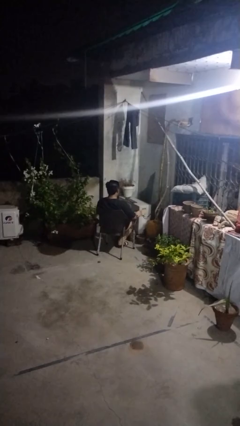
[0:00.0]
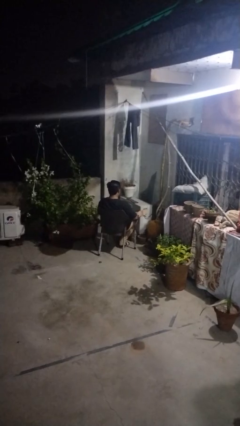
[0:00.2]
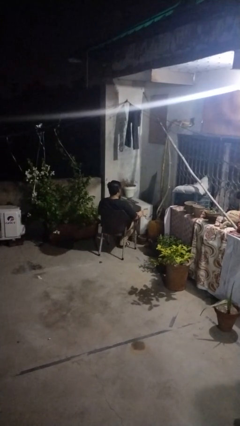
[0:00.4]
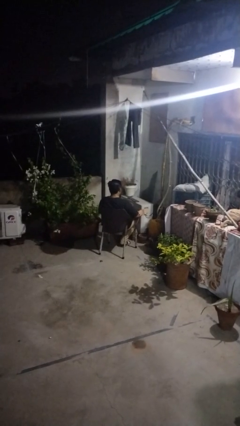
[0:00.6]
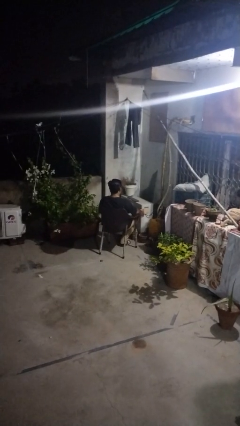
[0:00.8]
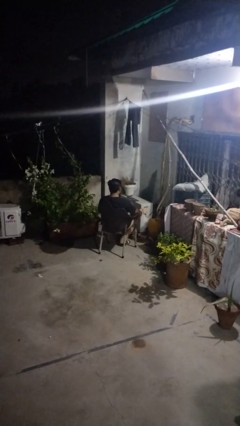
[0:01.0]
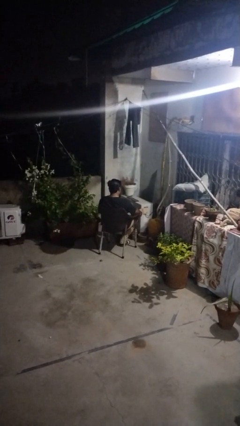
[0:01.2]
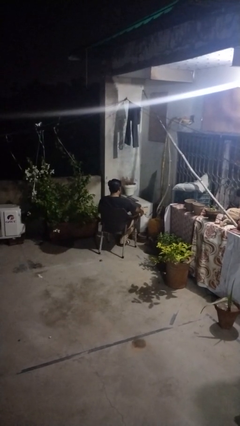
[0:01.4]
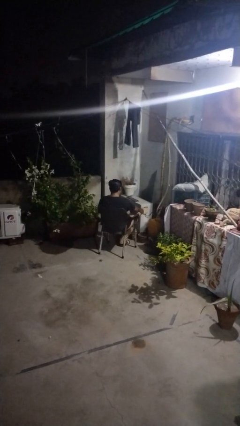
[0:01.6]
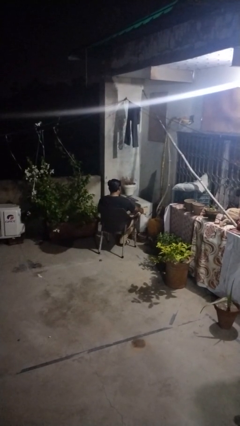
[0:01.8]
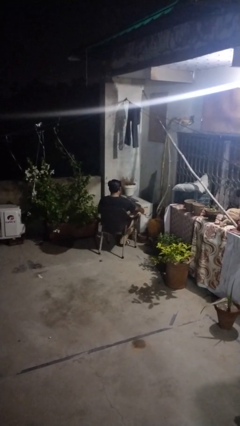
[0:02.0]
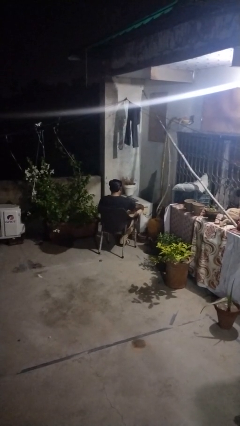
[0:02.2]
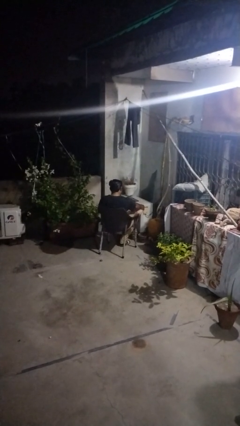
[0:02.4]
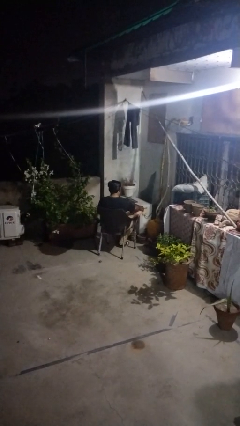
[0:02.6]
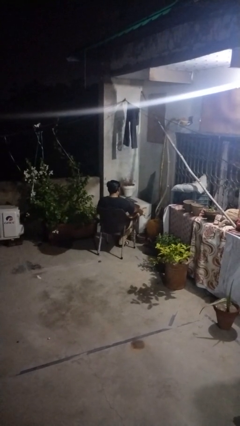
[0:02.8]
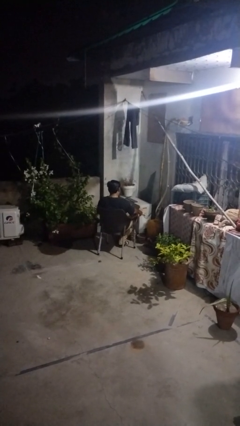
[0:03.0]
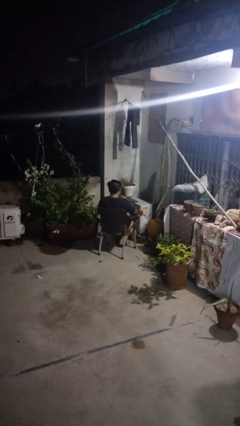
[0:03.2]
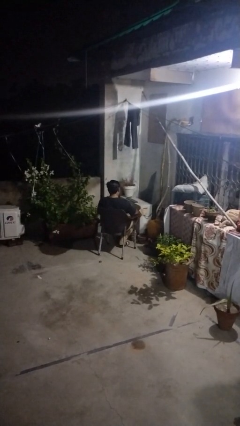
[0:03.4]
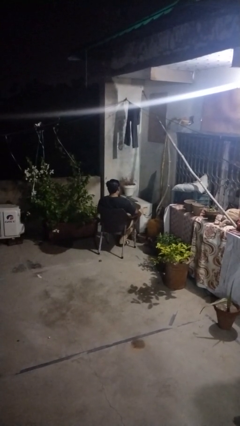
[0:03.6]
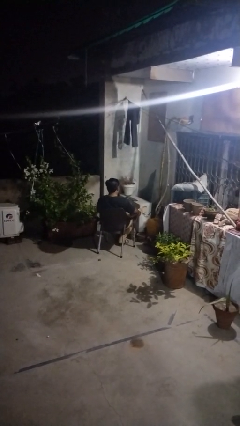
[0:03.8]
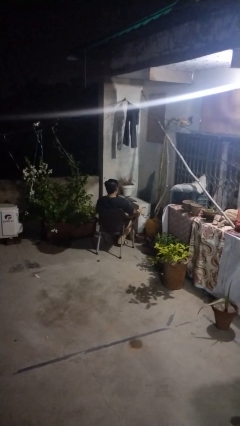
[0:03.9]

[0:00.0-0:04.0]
person rubs foot

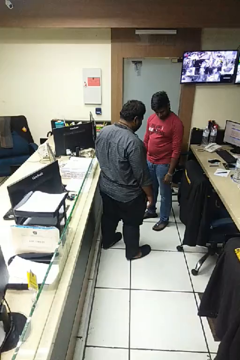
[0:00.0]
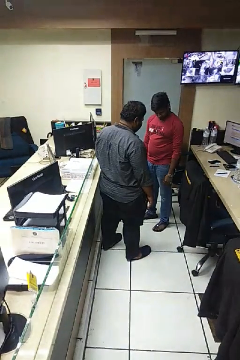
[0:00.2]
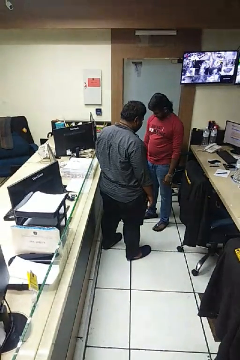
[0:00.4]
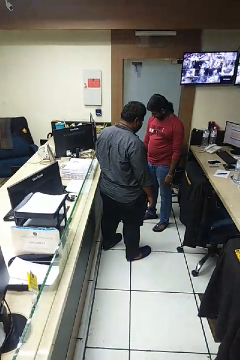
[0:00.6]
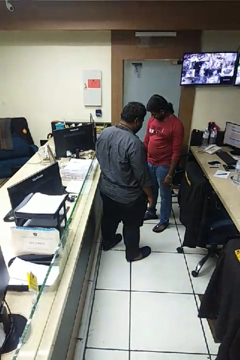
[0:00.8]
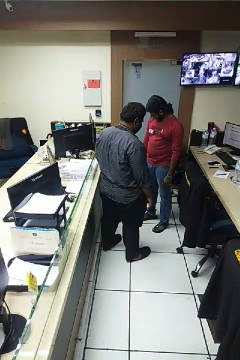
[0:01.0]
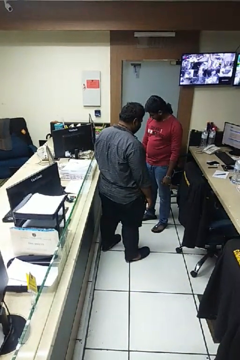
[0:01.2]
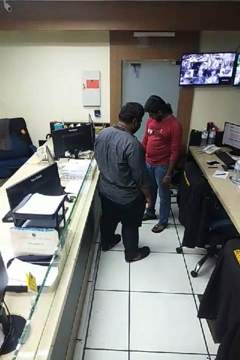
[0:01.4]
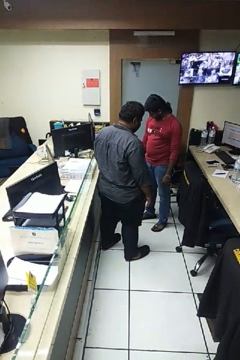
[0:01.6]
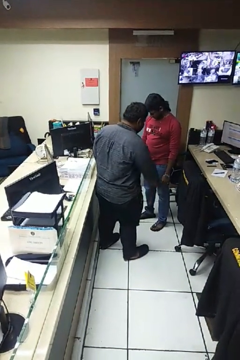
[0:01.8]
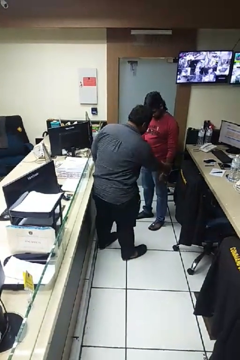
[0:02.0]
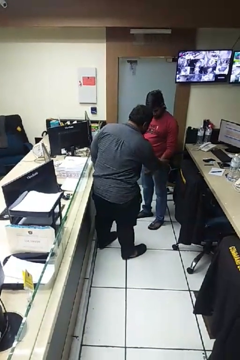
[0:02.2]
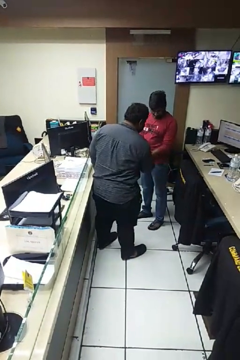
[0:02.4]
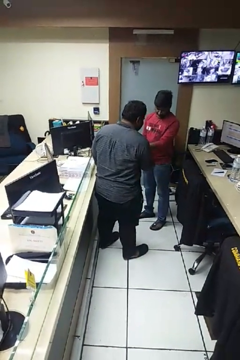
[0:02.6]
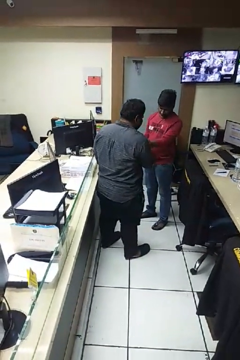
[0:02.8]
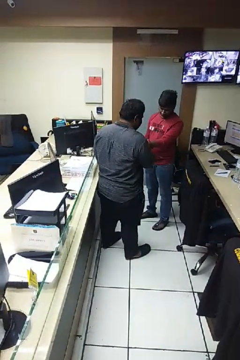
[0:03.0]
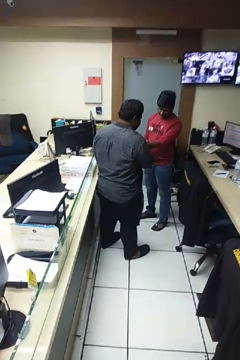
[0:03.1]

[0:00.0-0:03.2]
person grabs person by forearm

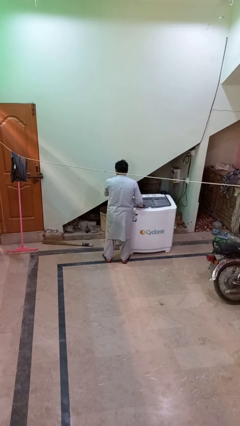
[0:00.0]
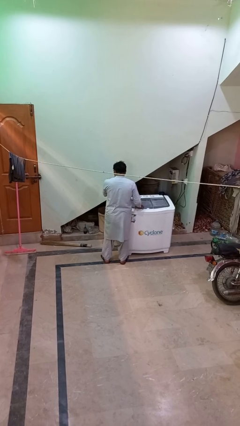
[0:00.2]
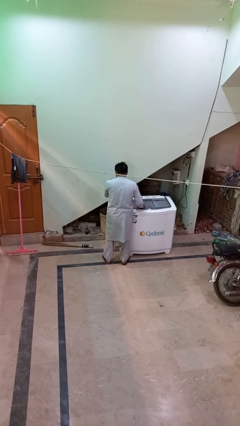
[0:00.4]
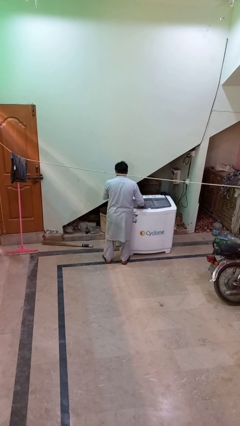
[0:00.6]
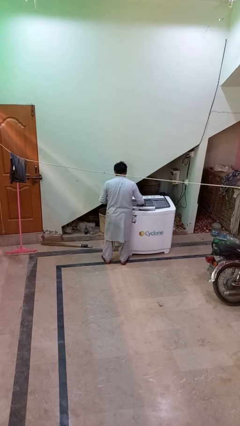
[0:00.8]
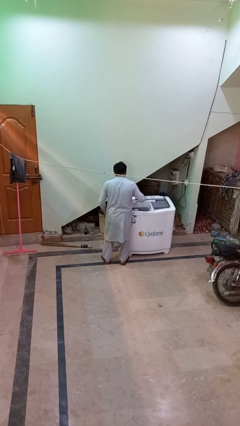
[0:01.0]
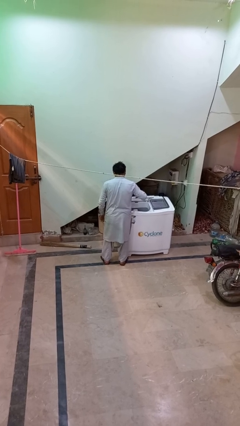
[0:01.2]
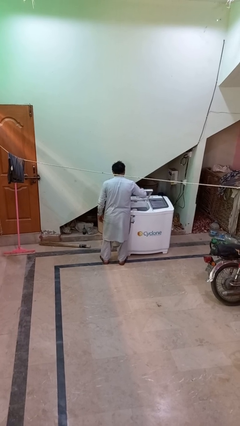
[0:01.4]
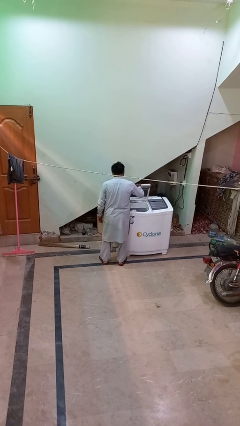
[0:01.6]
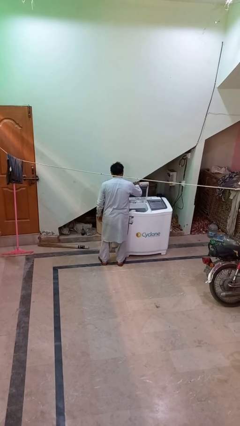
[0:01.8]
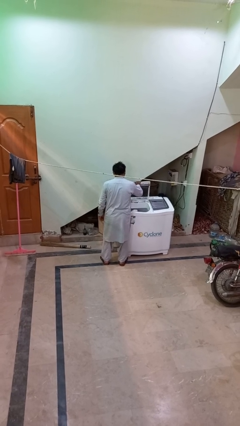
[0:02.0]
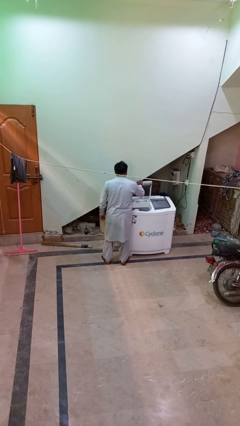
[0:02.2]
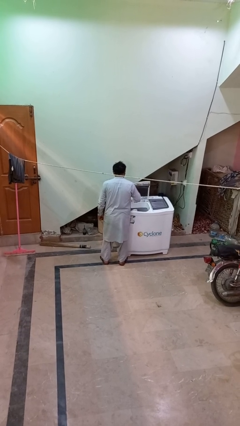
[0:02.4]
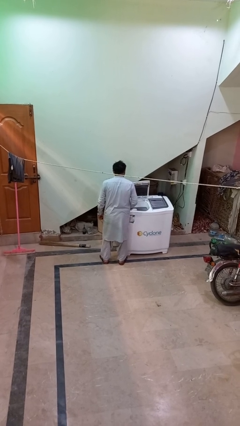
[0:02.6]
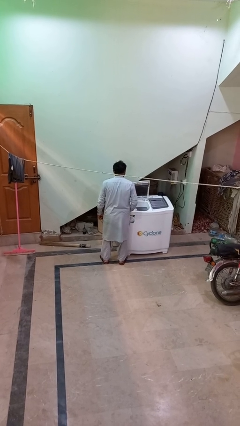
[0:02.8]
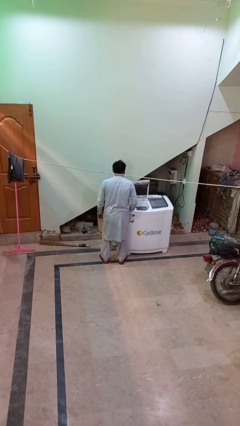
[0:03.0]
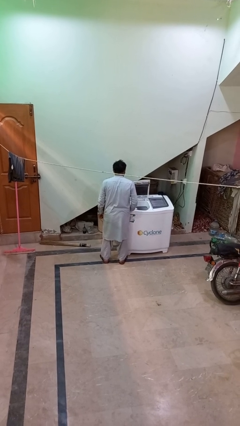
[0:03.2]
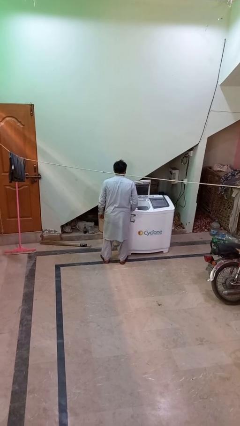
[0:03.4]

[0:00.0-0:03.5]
person opens clothes washer

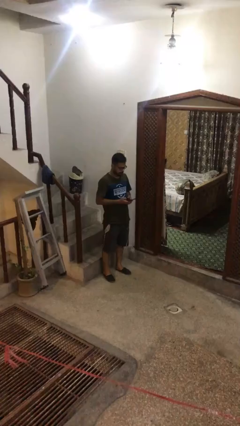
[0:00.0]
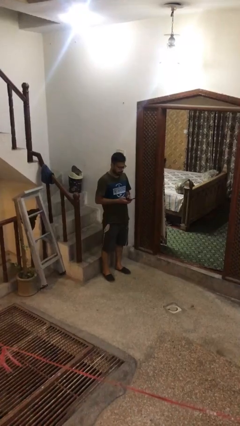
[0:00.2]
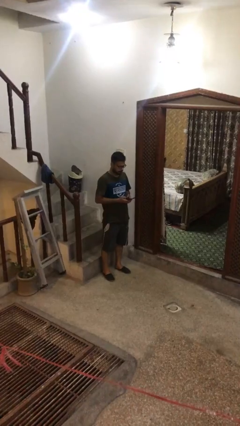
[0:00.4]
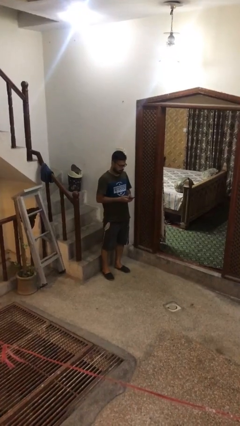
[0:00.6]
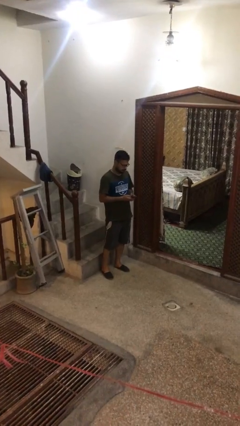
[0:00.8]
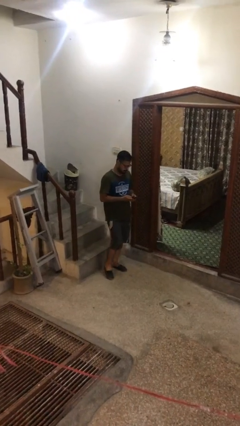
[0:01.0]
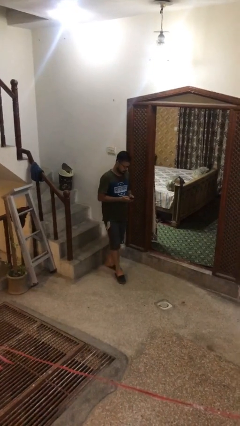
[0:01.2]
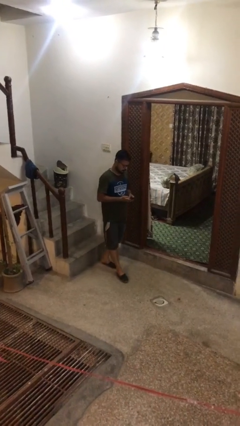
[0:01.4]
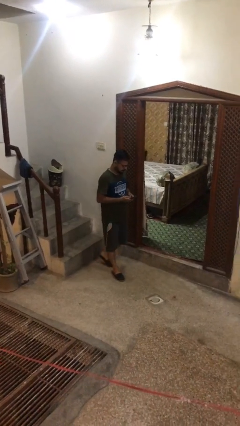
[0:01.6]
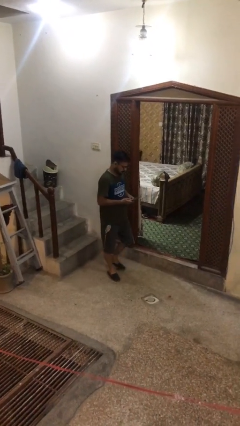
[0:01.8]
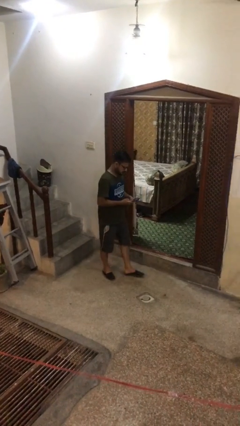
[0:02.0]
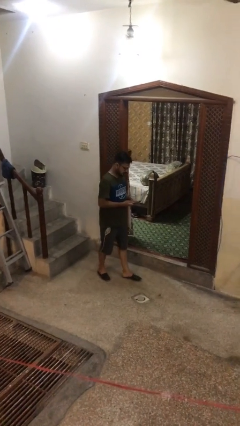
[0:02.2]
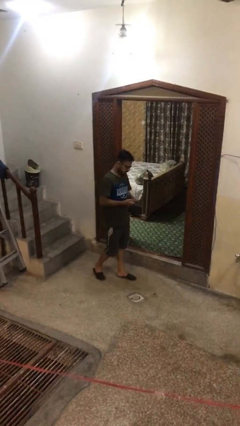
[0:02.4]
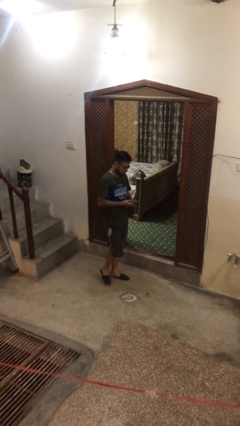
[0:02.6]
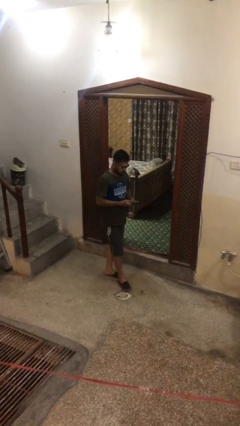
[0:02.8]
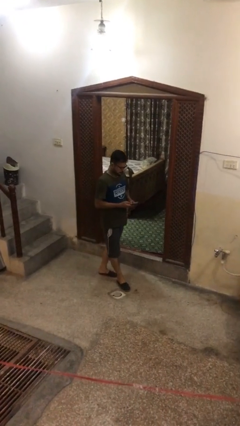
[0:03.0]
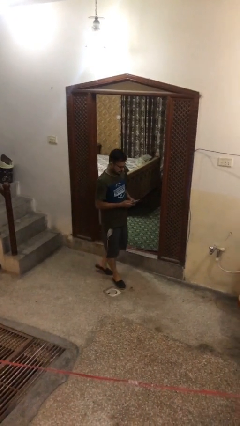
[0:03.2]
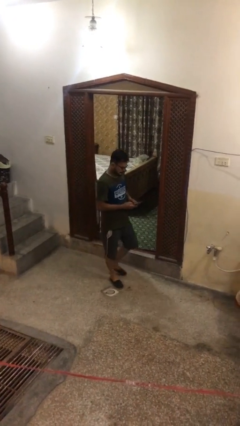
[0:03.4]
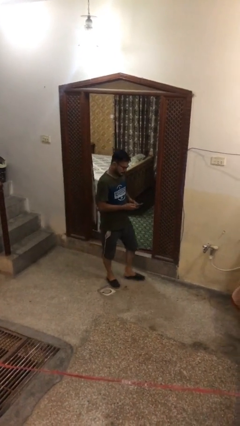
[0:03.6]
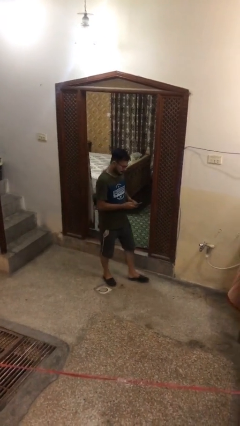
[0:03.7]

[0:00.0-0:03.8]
person texts on phone

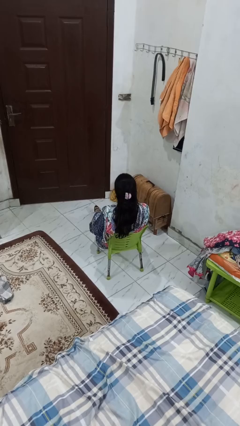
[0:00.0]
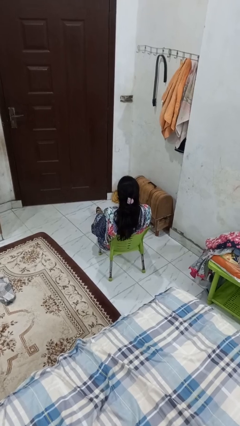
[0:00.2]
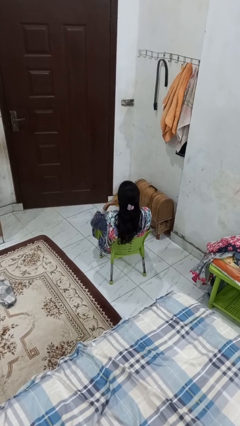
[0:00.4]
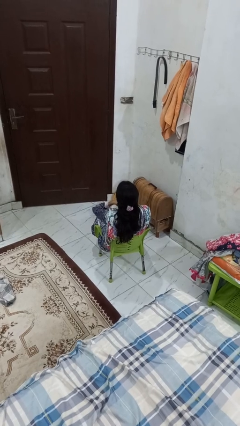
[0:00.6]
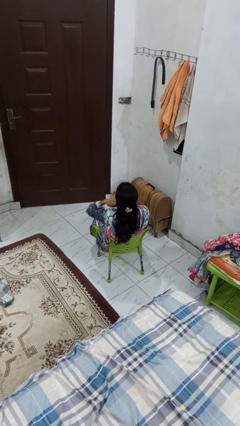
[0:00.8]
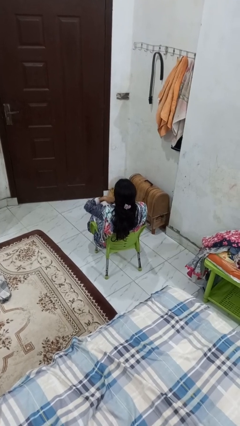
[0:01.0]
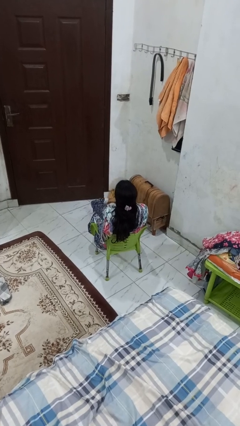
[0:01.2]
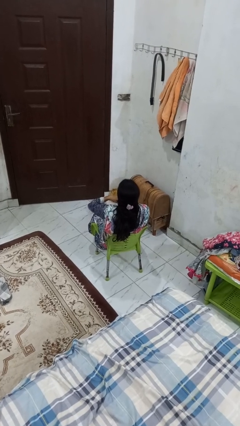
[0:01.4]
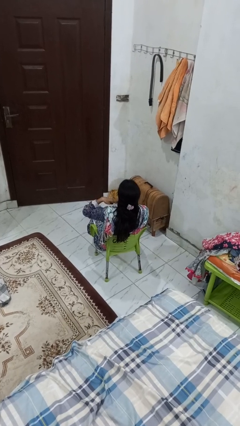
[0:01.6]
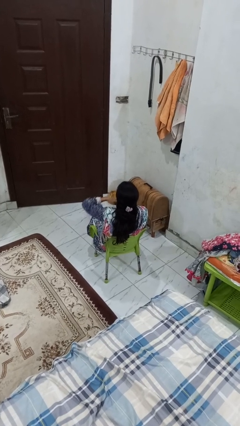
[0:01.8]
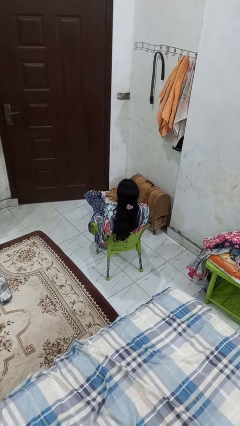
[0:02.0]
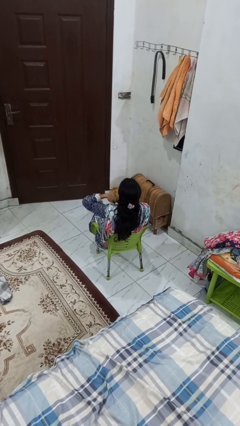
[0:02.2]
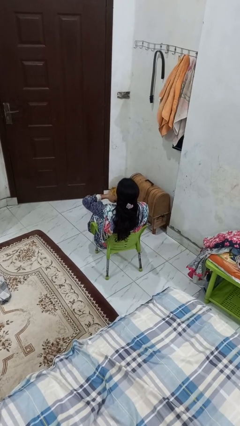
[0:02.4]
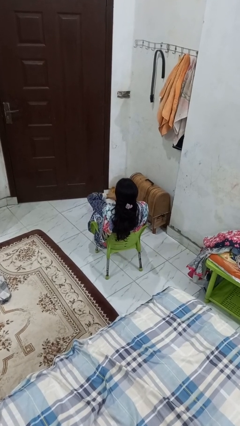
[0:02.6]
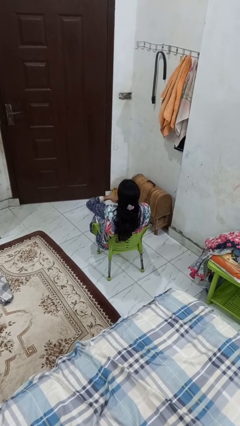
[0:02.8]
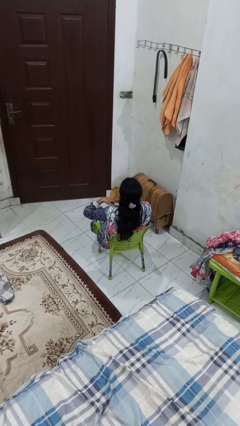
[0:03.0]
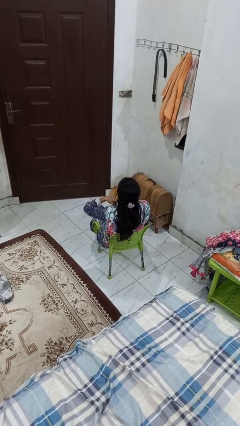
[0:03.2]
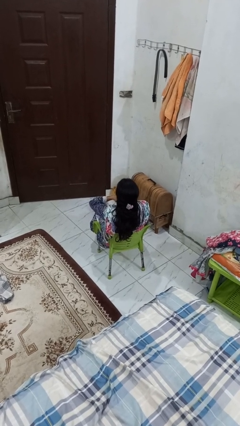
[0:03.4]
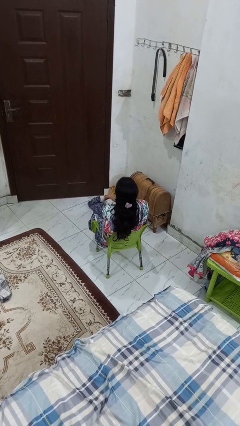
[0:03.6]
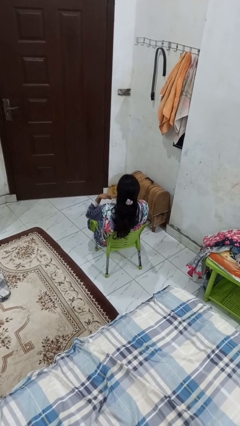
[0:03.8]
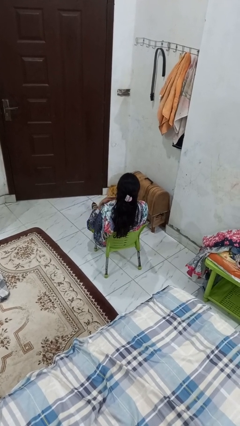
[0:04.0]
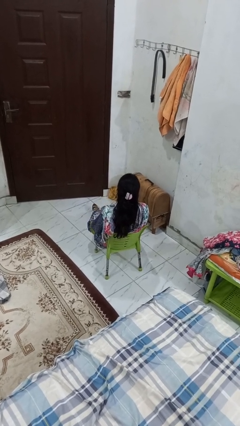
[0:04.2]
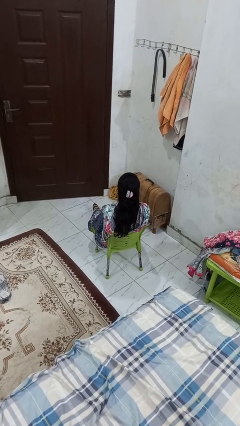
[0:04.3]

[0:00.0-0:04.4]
person gestures cut
